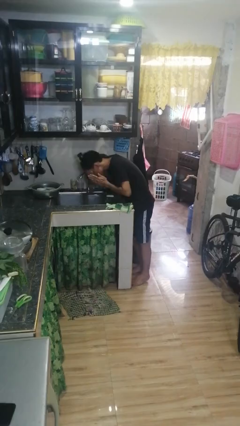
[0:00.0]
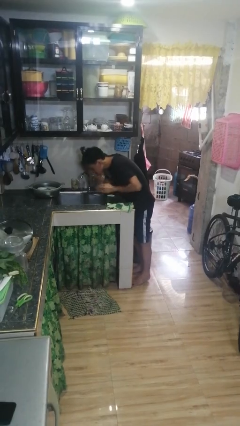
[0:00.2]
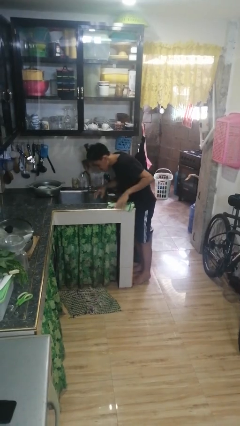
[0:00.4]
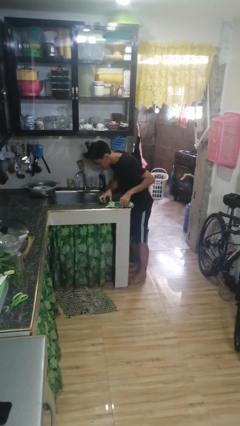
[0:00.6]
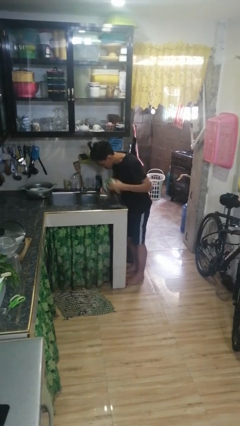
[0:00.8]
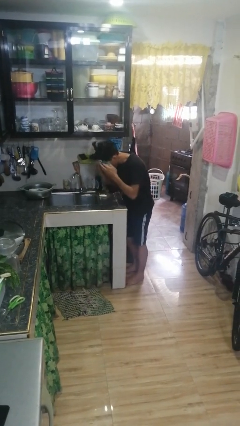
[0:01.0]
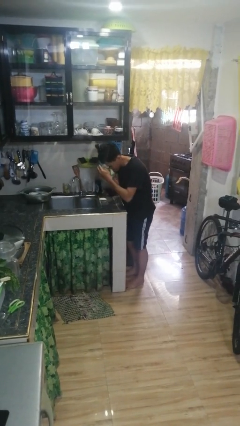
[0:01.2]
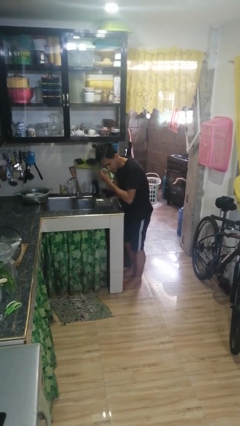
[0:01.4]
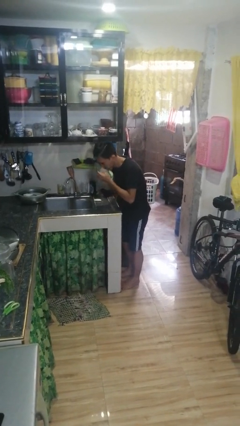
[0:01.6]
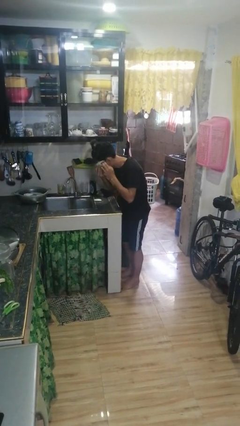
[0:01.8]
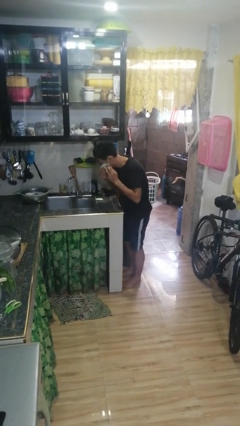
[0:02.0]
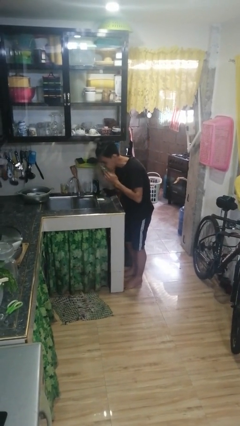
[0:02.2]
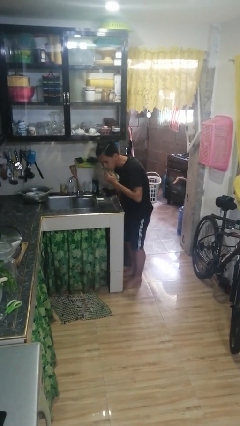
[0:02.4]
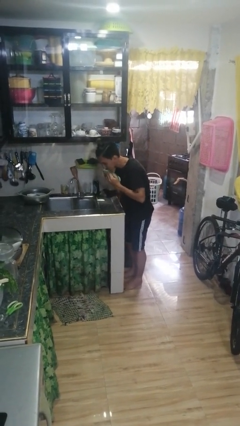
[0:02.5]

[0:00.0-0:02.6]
person dries face with towel

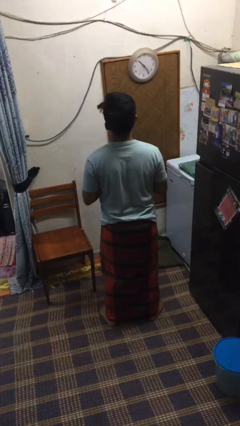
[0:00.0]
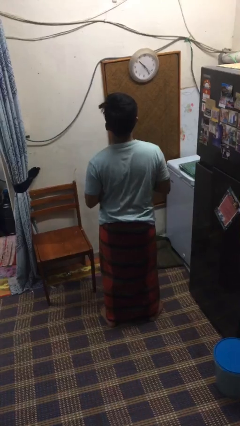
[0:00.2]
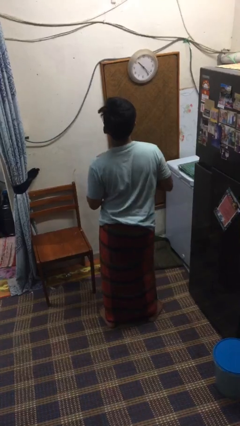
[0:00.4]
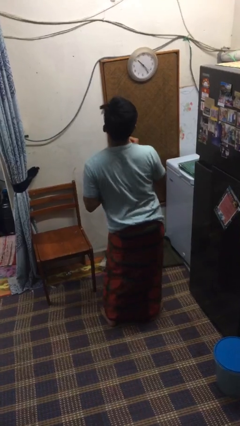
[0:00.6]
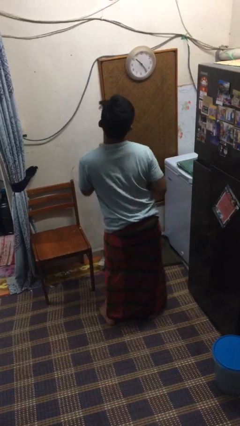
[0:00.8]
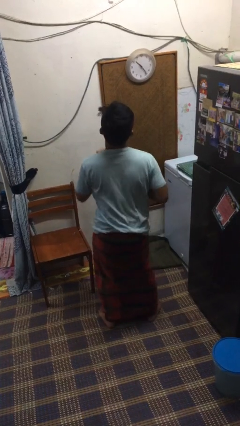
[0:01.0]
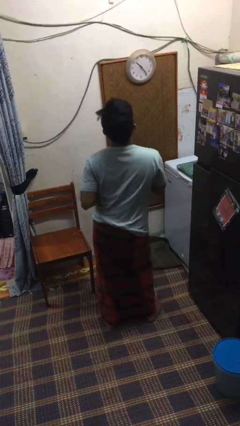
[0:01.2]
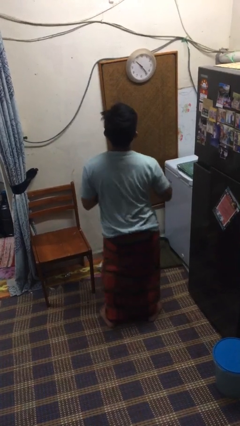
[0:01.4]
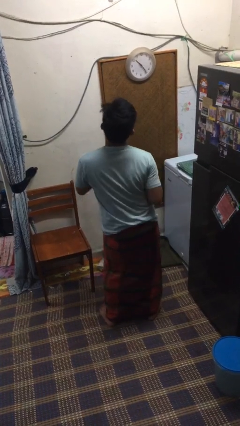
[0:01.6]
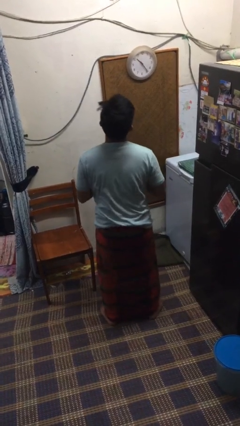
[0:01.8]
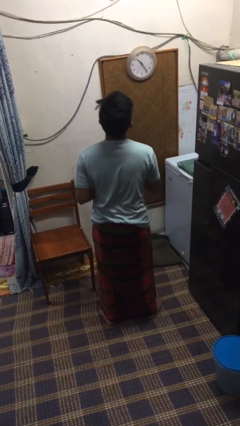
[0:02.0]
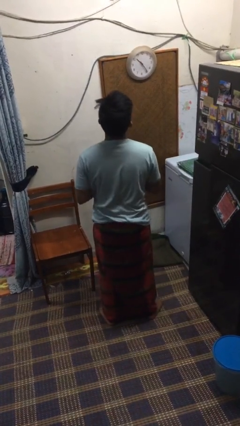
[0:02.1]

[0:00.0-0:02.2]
person wiggles hips

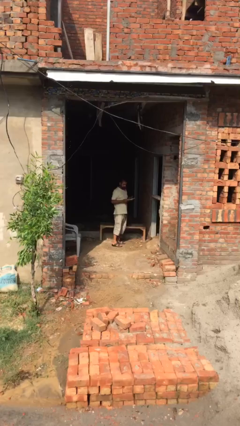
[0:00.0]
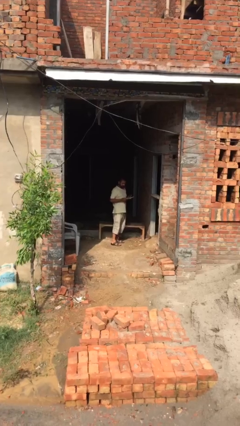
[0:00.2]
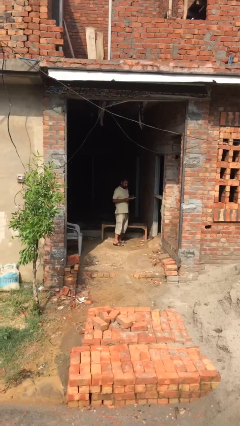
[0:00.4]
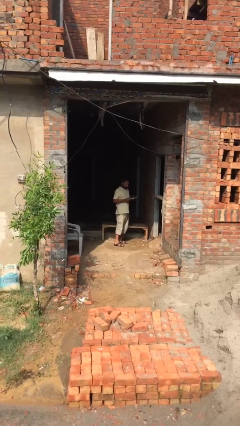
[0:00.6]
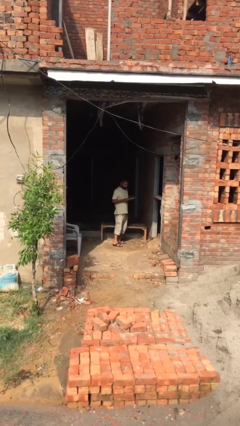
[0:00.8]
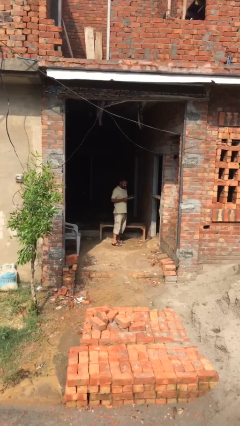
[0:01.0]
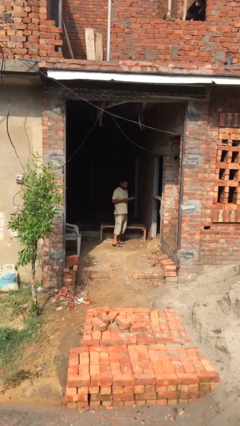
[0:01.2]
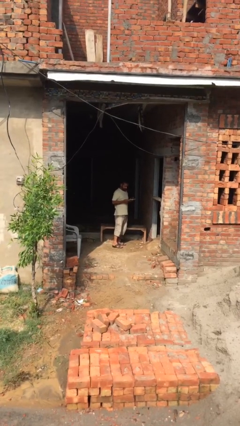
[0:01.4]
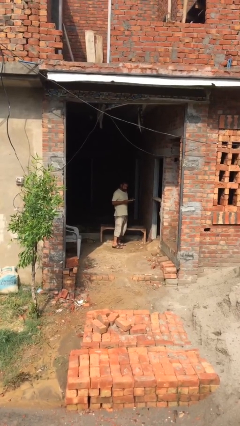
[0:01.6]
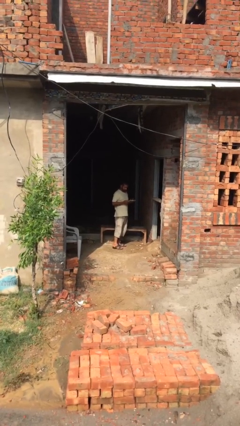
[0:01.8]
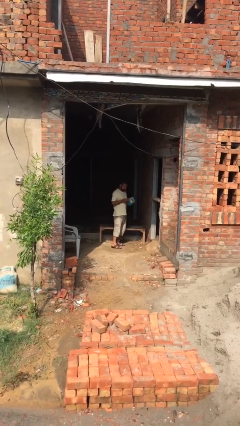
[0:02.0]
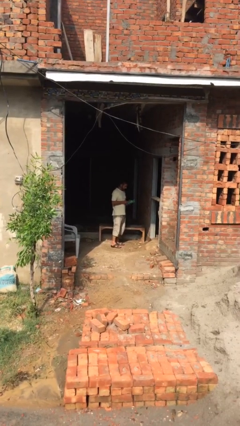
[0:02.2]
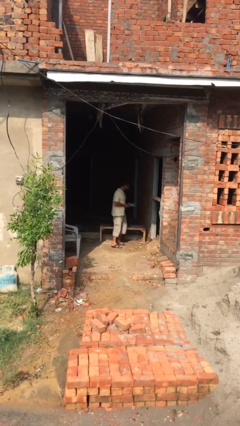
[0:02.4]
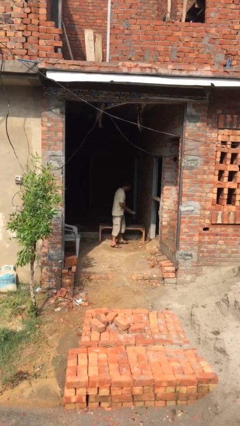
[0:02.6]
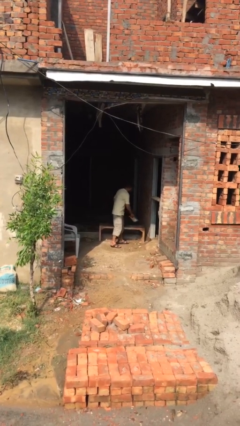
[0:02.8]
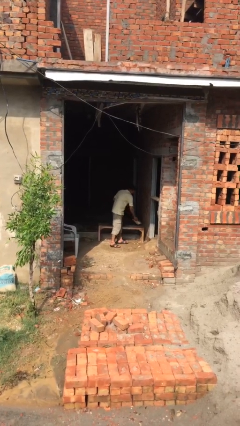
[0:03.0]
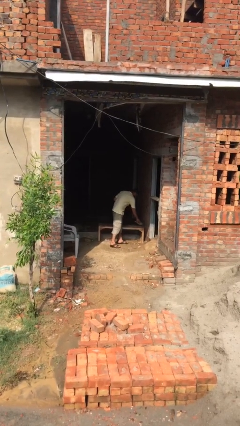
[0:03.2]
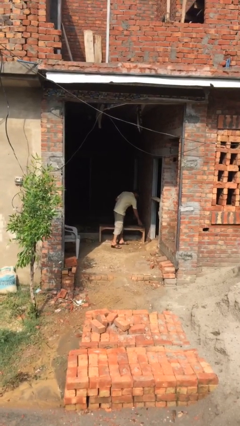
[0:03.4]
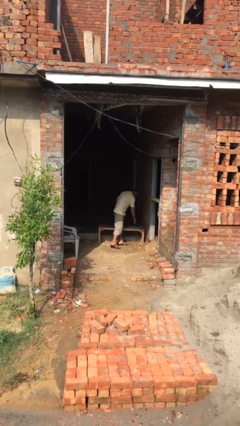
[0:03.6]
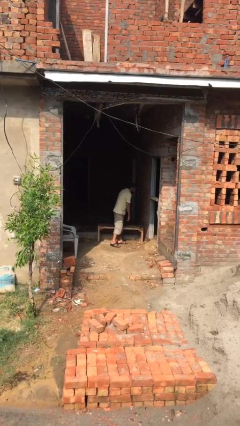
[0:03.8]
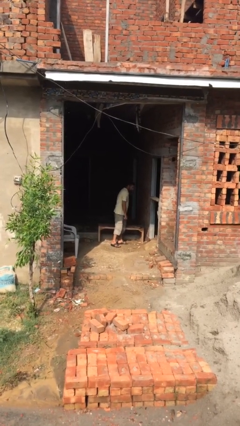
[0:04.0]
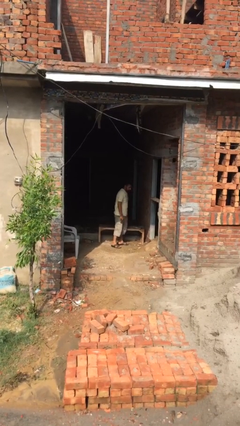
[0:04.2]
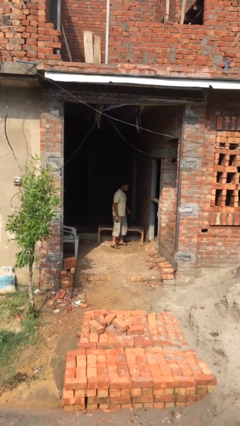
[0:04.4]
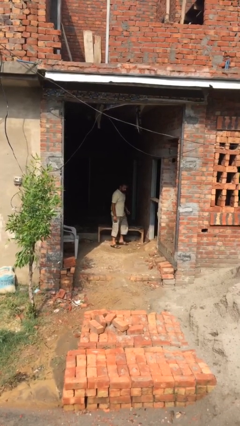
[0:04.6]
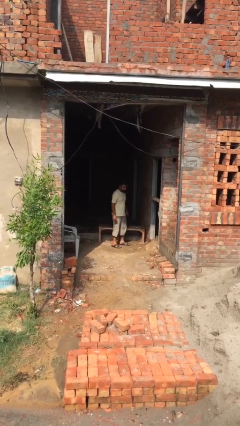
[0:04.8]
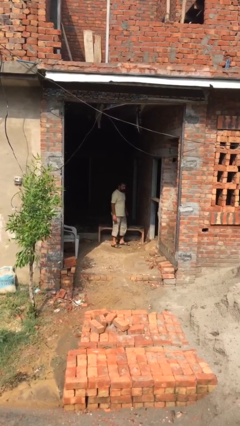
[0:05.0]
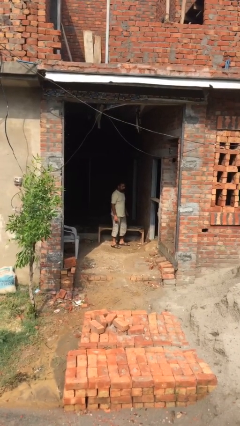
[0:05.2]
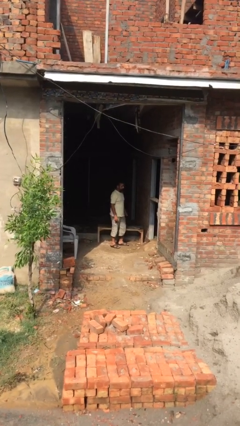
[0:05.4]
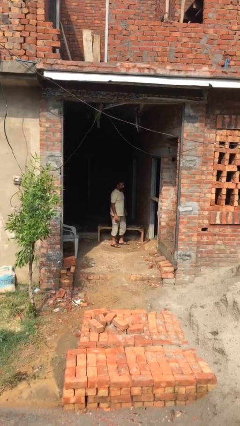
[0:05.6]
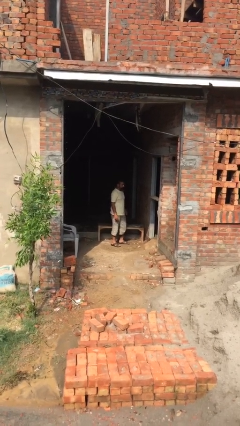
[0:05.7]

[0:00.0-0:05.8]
person puts down object on table

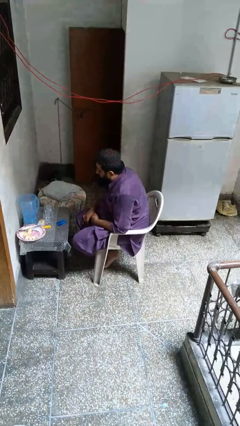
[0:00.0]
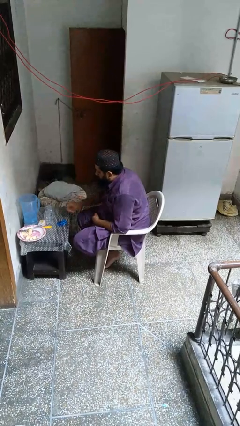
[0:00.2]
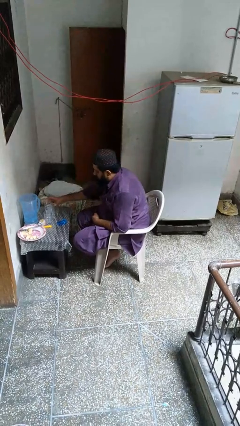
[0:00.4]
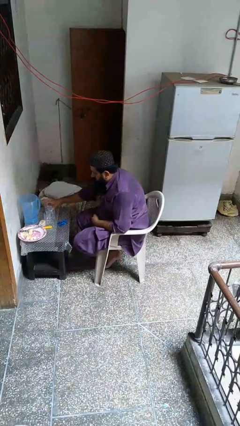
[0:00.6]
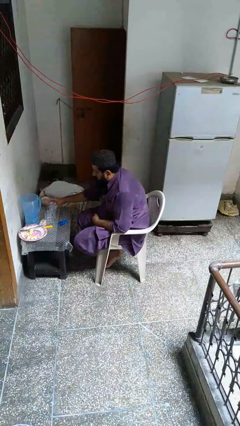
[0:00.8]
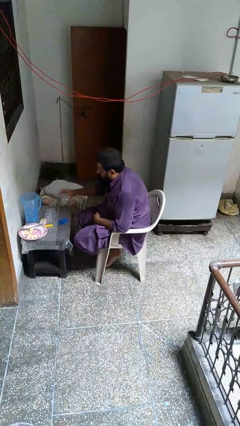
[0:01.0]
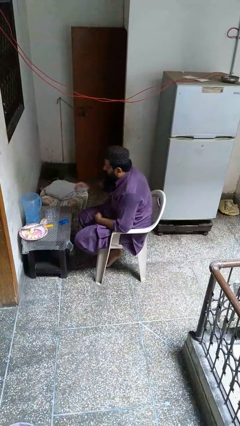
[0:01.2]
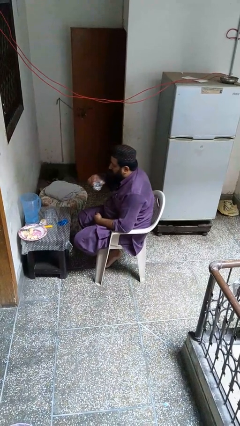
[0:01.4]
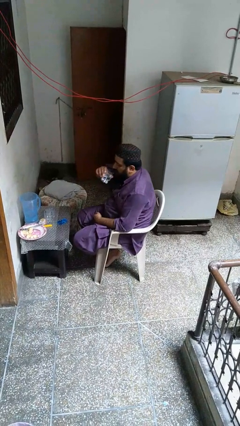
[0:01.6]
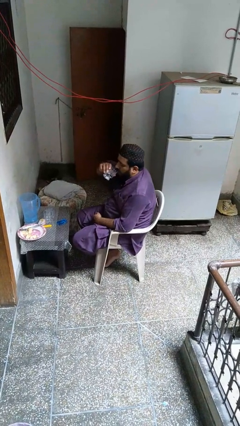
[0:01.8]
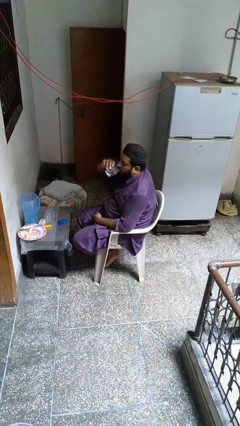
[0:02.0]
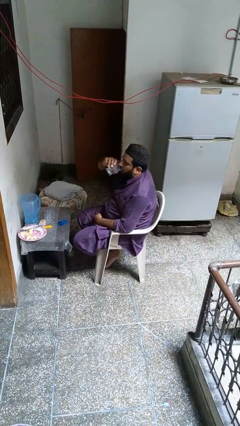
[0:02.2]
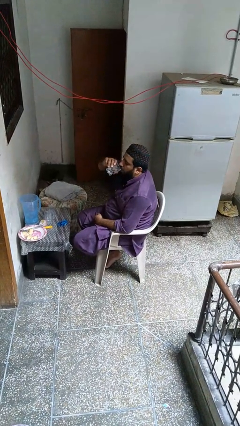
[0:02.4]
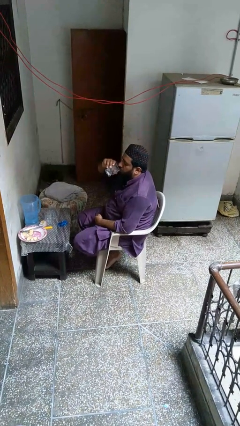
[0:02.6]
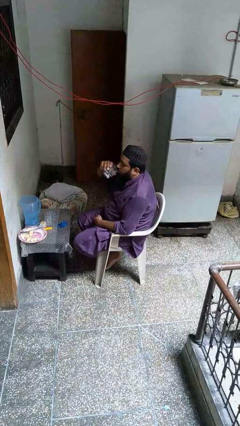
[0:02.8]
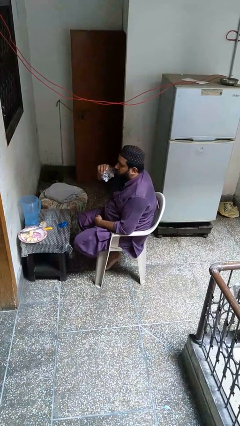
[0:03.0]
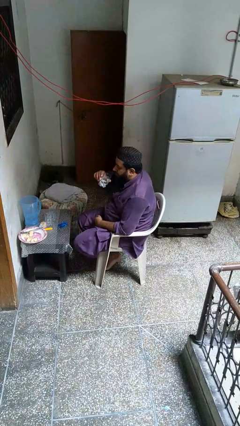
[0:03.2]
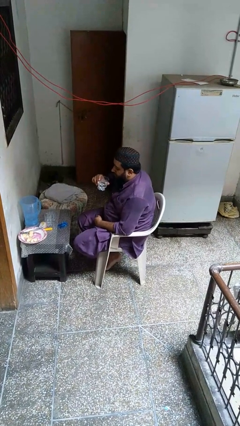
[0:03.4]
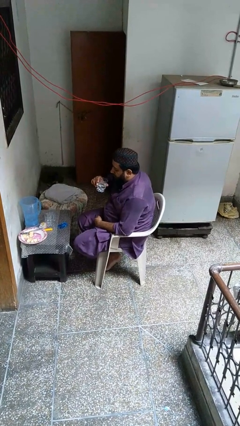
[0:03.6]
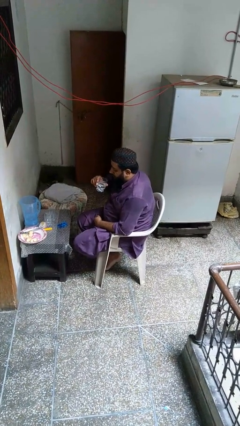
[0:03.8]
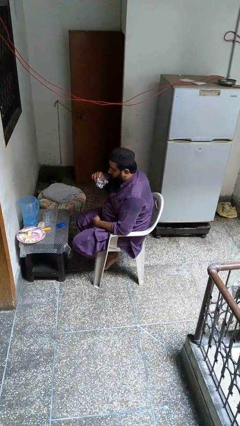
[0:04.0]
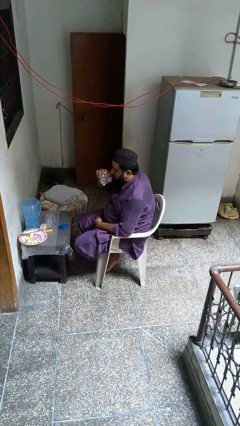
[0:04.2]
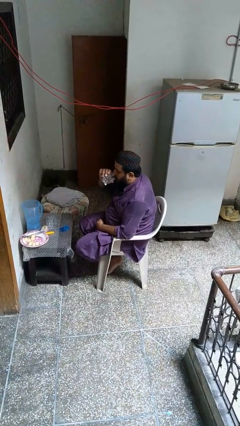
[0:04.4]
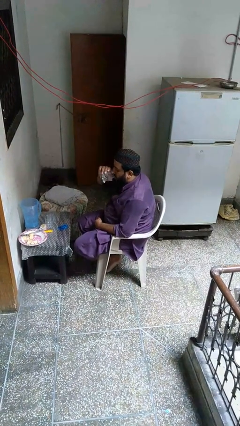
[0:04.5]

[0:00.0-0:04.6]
person drinks from cup

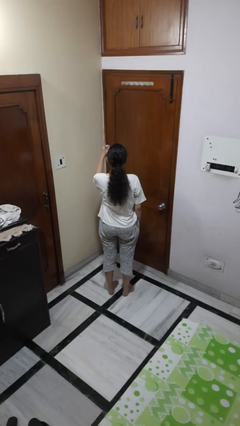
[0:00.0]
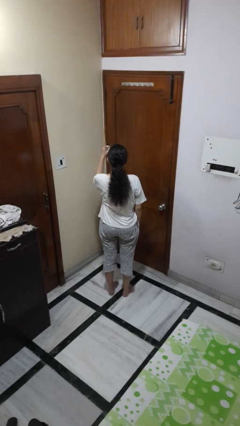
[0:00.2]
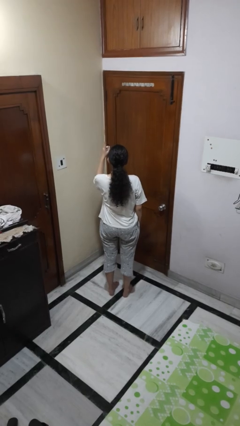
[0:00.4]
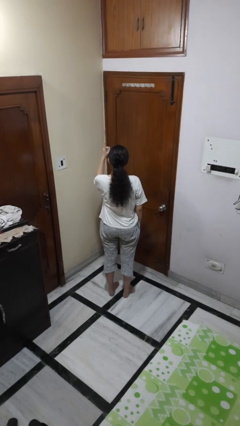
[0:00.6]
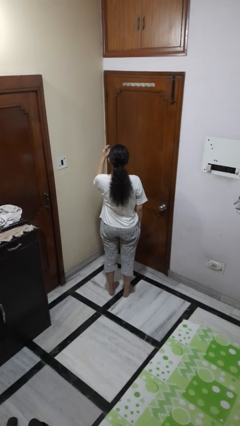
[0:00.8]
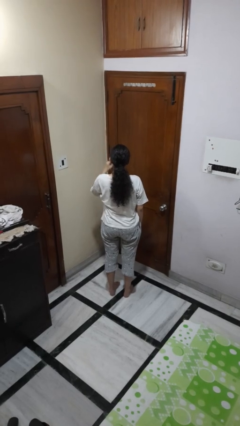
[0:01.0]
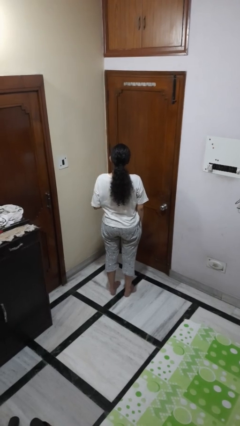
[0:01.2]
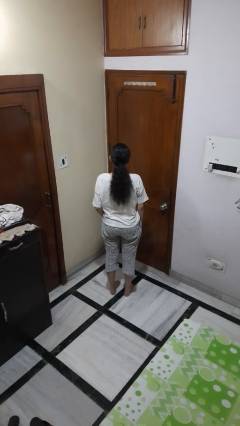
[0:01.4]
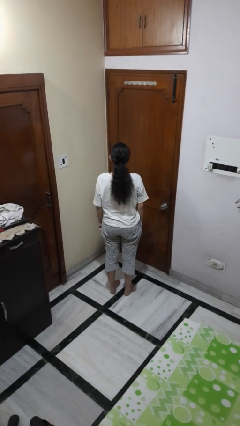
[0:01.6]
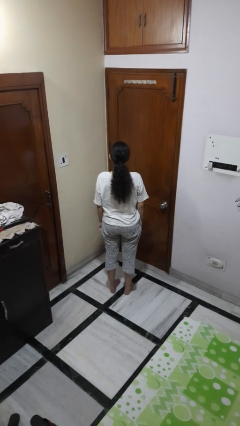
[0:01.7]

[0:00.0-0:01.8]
person gestures number one

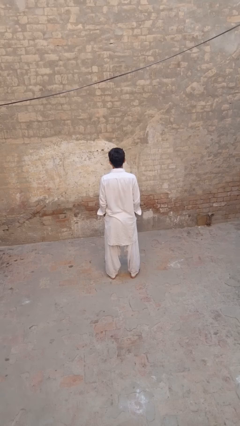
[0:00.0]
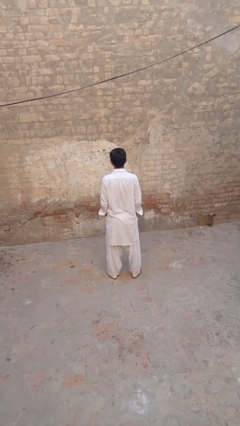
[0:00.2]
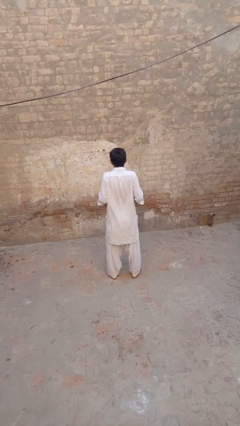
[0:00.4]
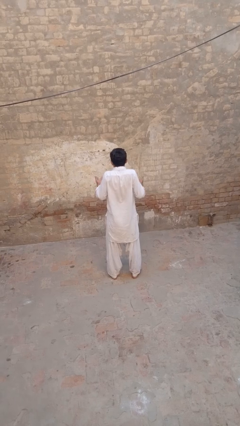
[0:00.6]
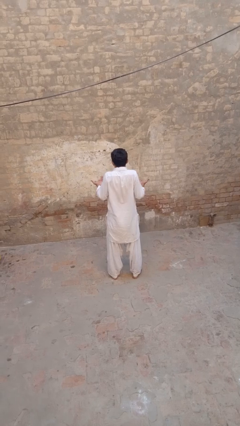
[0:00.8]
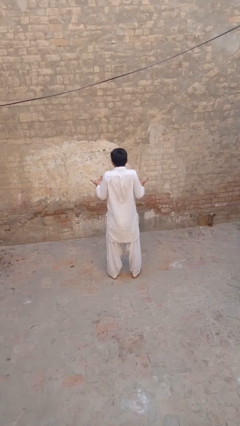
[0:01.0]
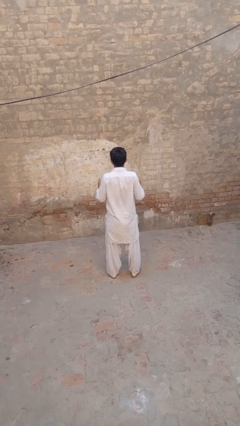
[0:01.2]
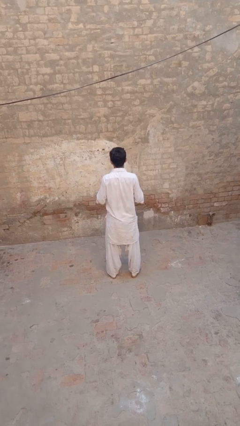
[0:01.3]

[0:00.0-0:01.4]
person shrugs
